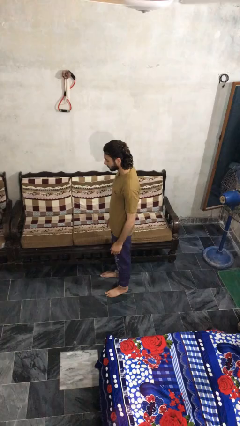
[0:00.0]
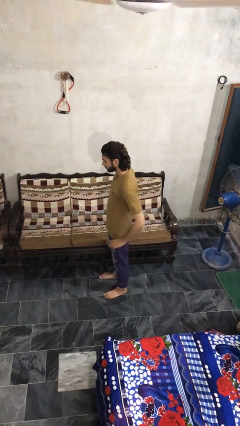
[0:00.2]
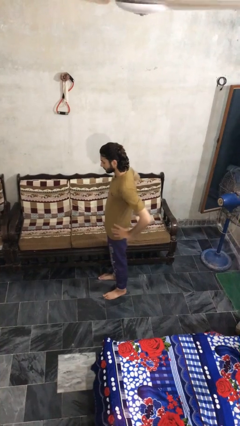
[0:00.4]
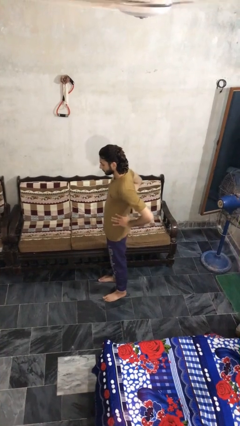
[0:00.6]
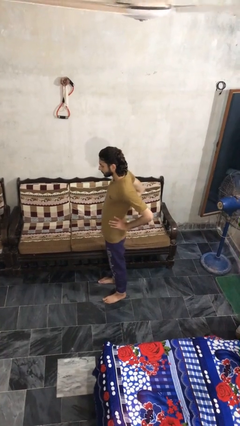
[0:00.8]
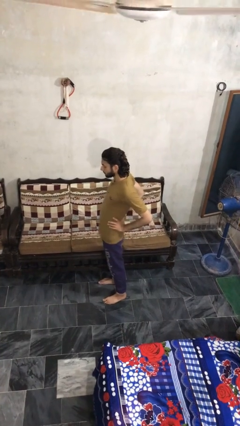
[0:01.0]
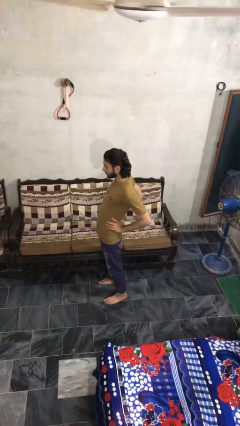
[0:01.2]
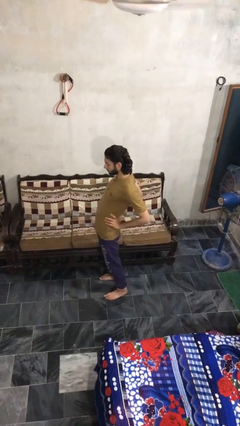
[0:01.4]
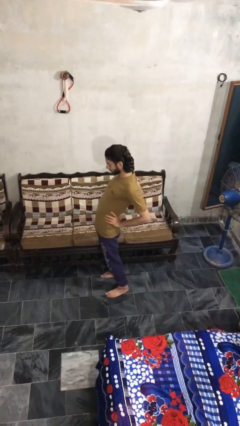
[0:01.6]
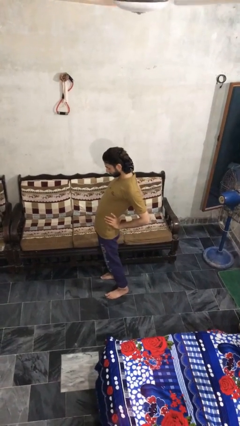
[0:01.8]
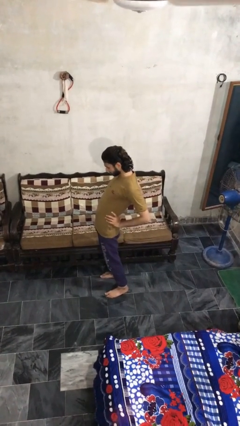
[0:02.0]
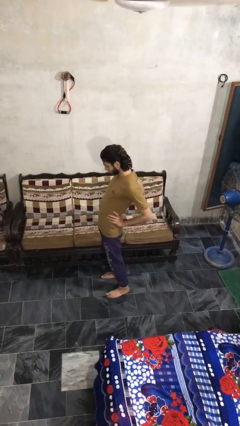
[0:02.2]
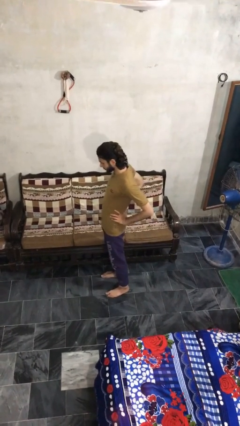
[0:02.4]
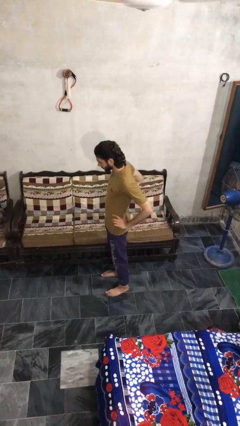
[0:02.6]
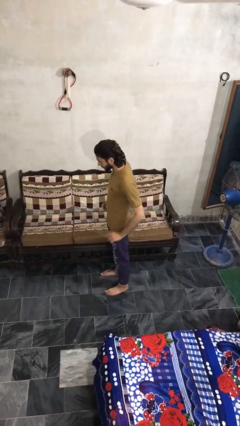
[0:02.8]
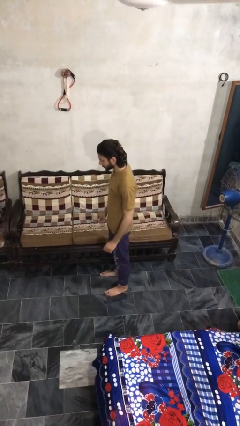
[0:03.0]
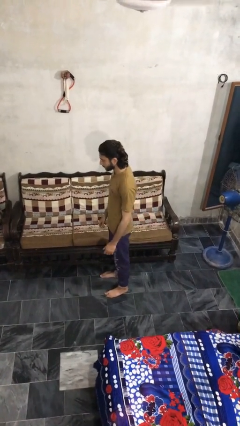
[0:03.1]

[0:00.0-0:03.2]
person stretches back

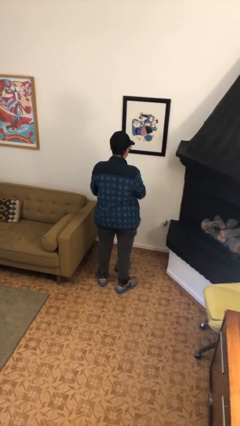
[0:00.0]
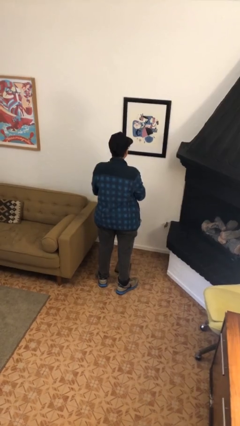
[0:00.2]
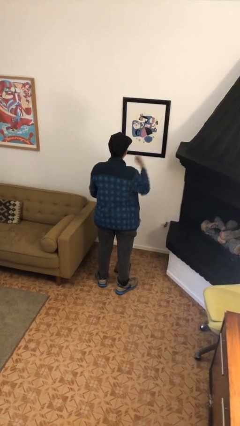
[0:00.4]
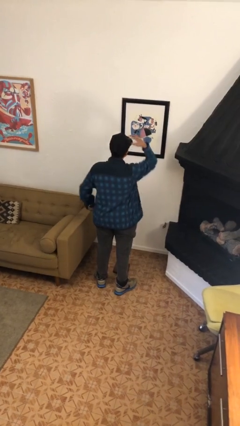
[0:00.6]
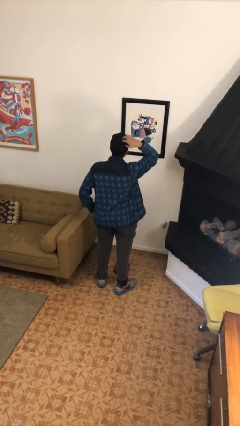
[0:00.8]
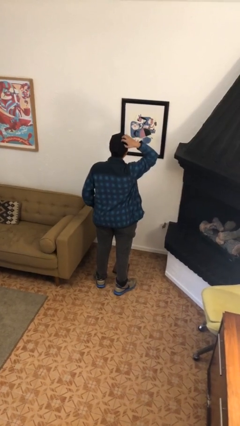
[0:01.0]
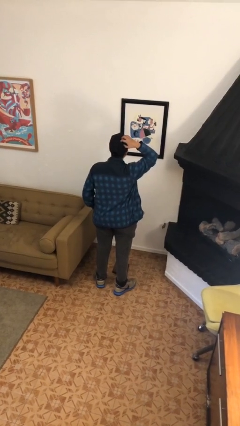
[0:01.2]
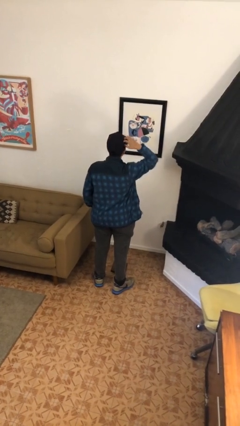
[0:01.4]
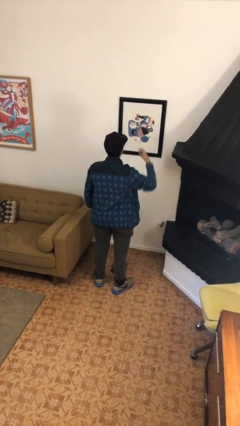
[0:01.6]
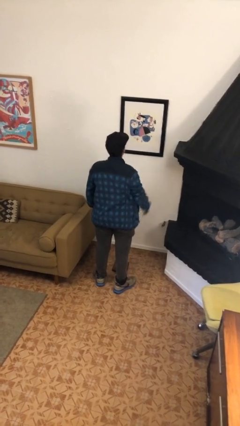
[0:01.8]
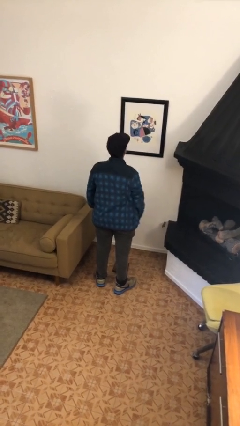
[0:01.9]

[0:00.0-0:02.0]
person scratches face

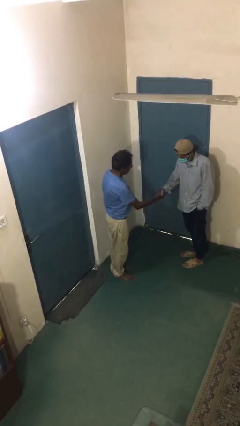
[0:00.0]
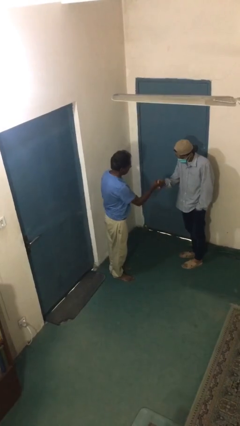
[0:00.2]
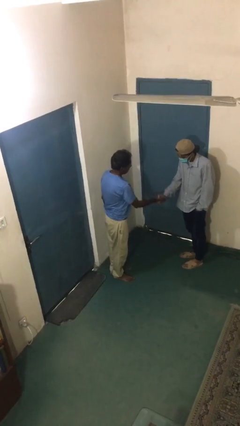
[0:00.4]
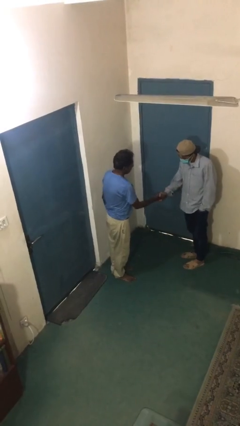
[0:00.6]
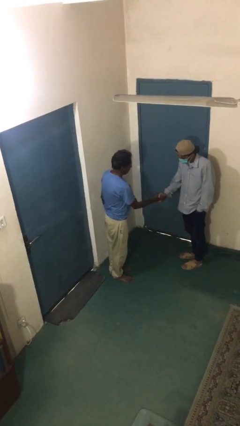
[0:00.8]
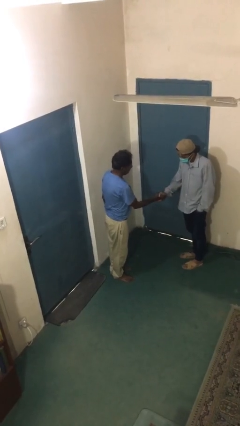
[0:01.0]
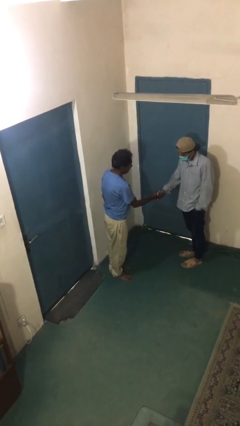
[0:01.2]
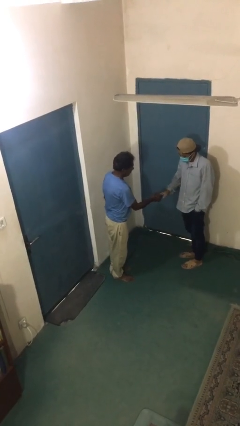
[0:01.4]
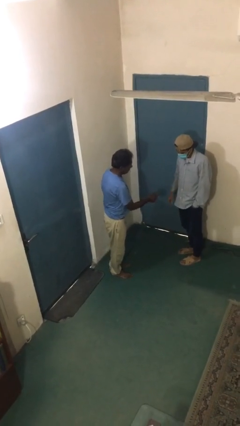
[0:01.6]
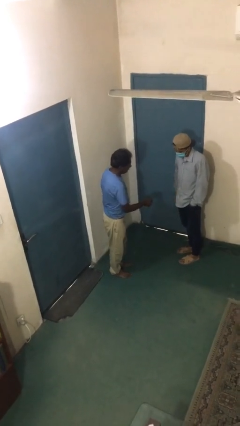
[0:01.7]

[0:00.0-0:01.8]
person shakes hand

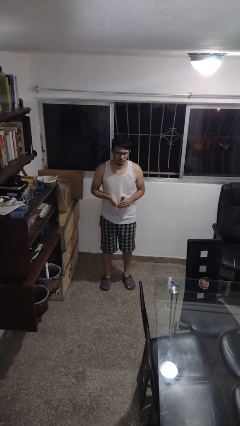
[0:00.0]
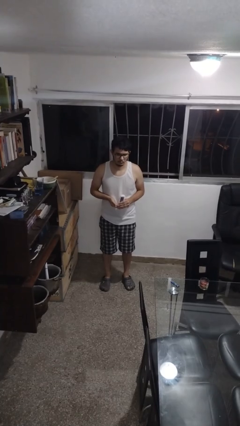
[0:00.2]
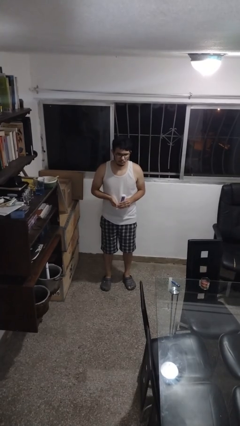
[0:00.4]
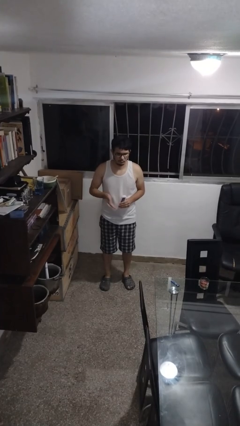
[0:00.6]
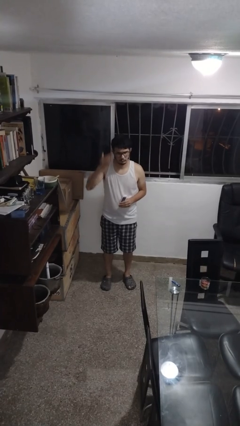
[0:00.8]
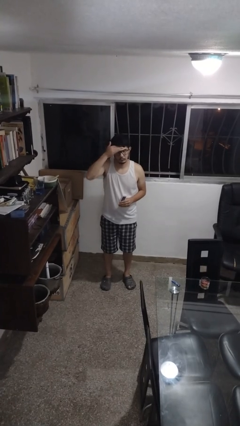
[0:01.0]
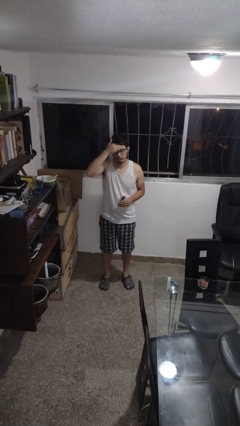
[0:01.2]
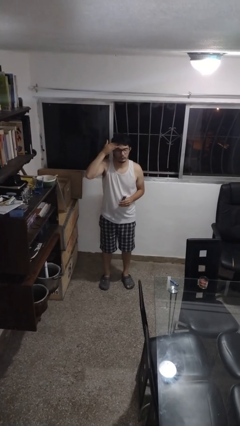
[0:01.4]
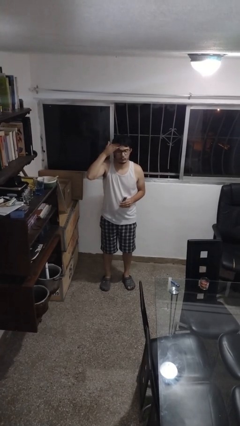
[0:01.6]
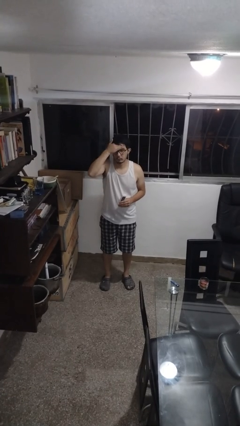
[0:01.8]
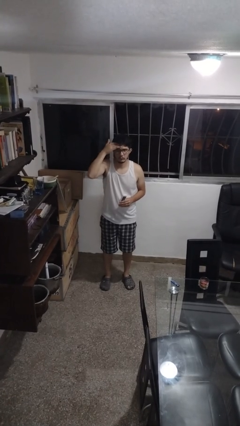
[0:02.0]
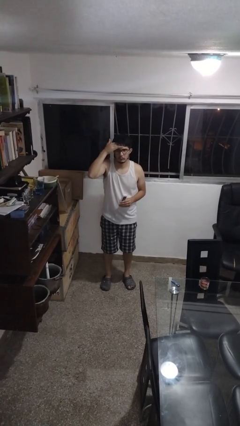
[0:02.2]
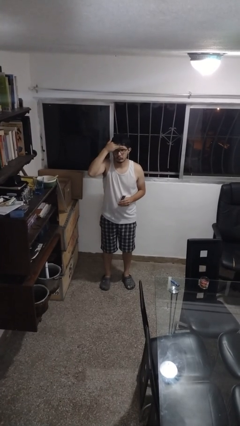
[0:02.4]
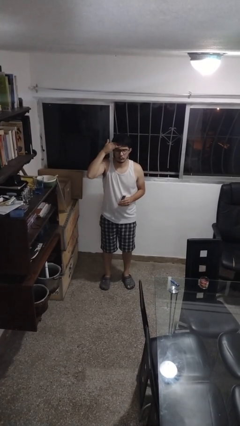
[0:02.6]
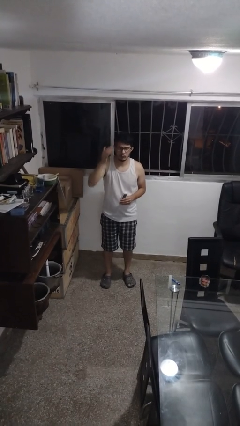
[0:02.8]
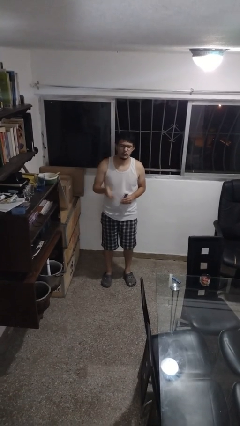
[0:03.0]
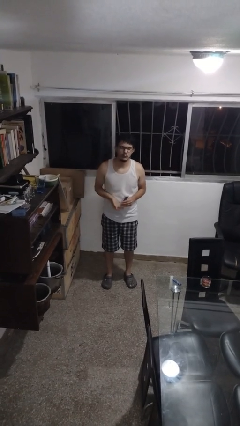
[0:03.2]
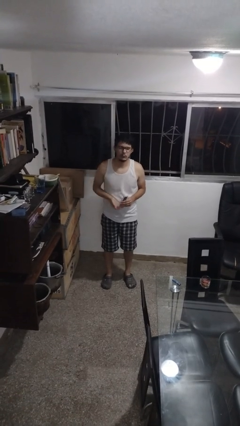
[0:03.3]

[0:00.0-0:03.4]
person applies facial moisturizer

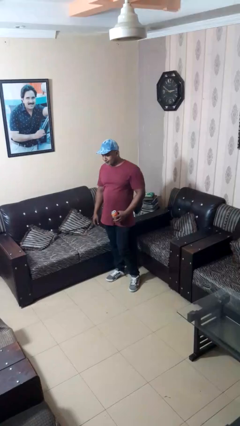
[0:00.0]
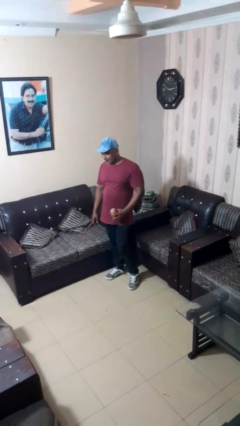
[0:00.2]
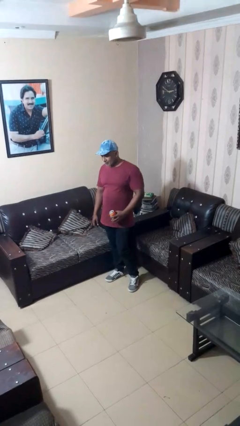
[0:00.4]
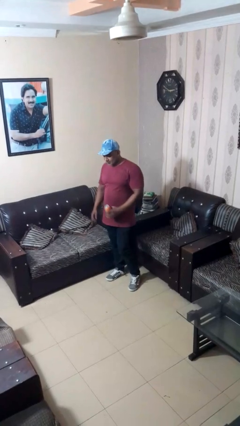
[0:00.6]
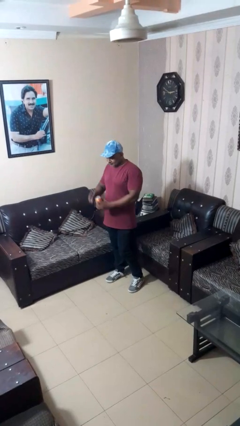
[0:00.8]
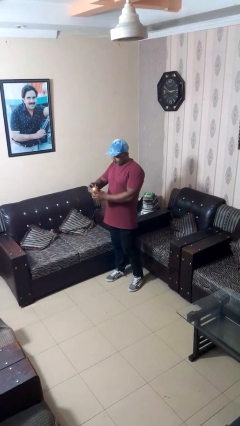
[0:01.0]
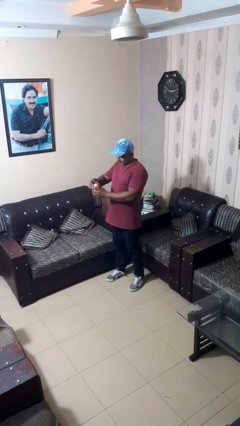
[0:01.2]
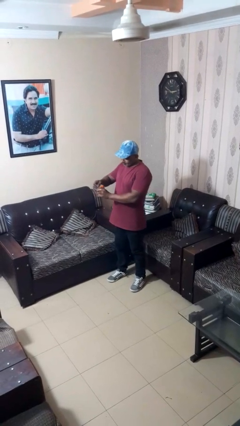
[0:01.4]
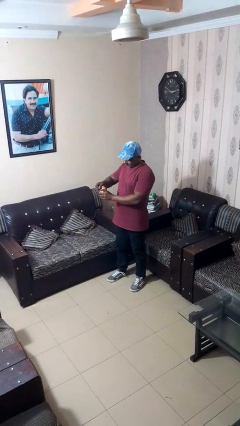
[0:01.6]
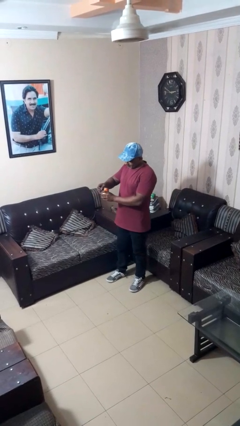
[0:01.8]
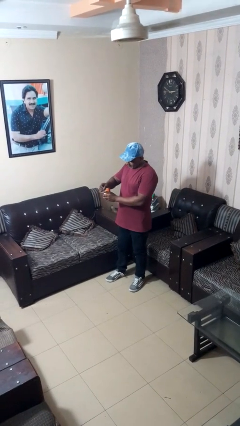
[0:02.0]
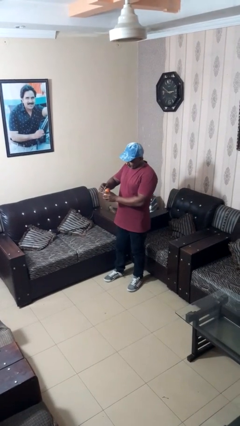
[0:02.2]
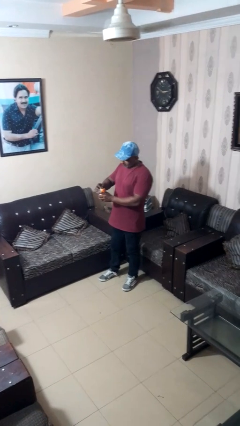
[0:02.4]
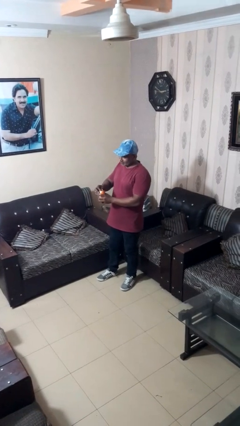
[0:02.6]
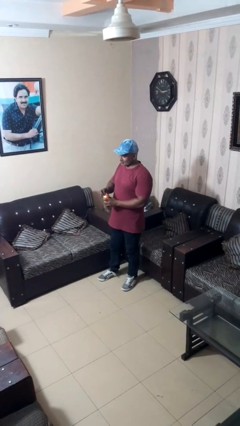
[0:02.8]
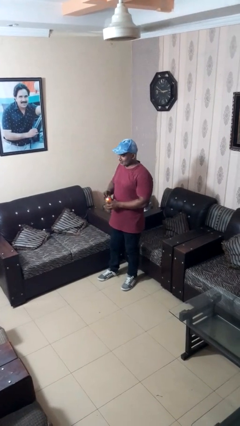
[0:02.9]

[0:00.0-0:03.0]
person opens beverage can

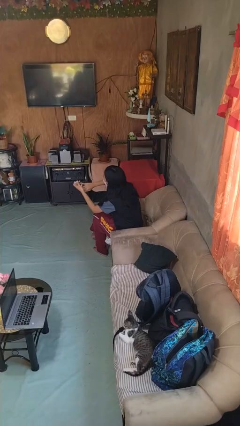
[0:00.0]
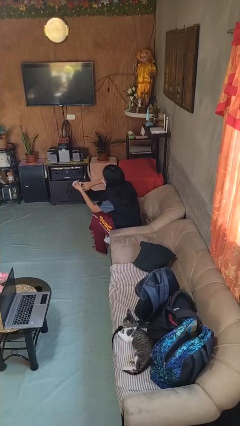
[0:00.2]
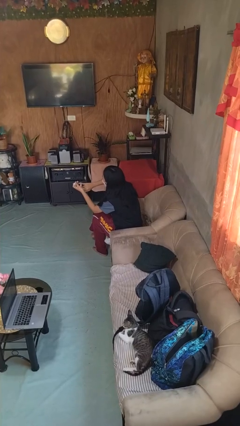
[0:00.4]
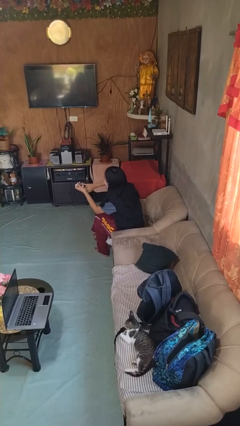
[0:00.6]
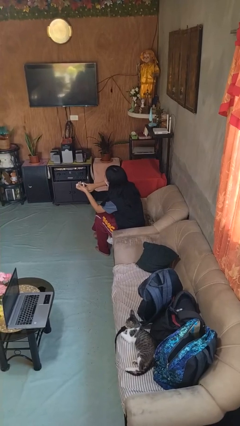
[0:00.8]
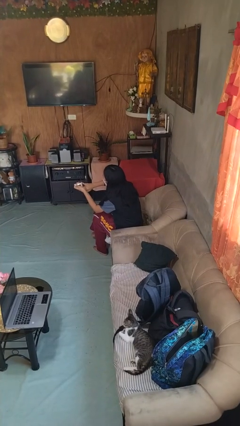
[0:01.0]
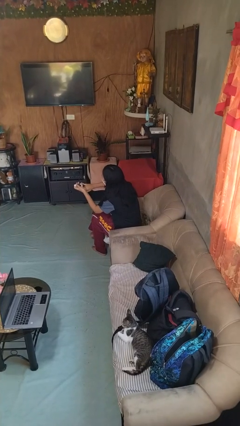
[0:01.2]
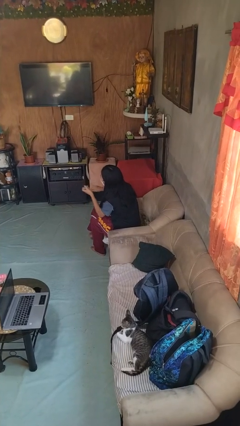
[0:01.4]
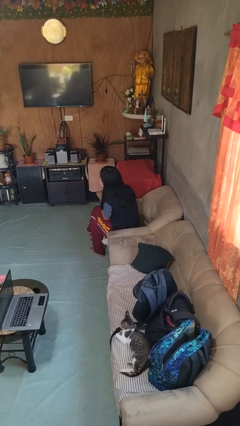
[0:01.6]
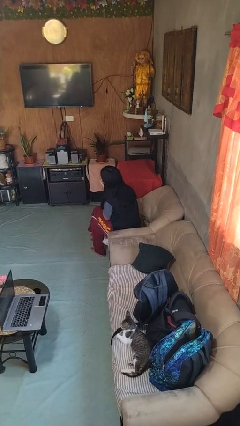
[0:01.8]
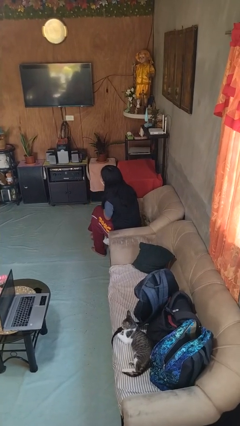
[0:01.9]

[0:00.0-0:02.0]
person clips fingernails

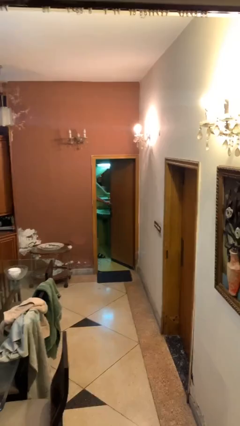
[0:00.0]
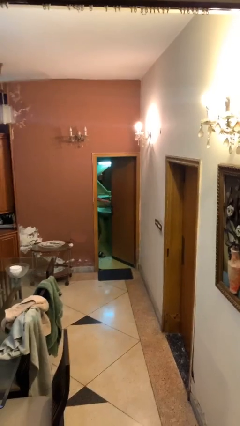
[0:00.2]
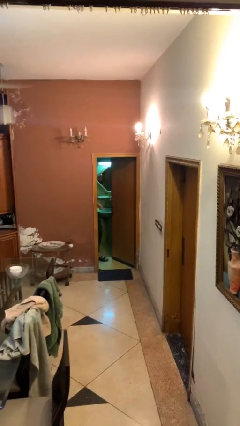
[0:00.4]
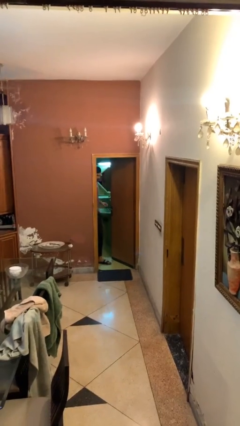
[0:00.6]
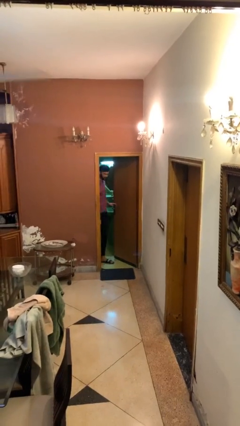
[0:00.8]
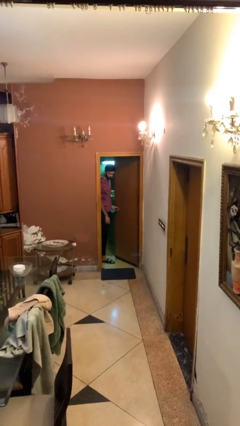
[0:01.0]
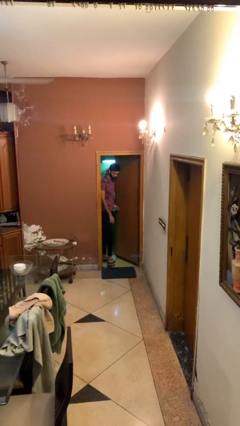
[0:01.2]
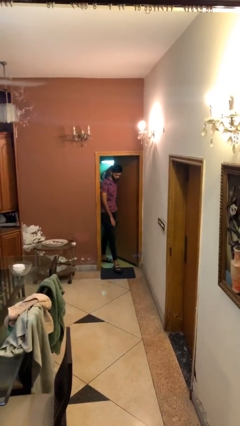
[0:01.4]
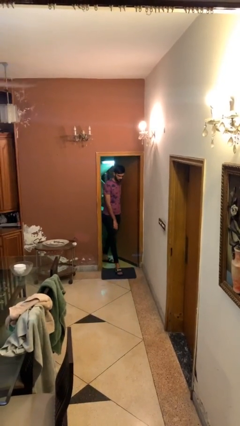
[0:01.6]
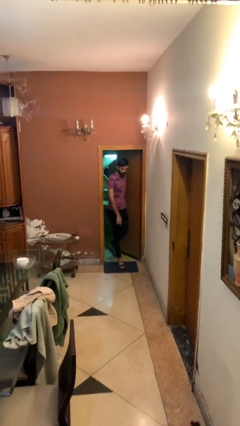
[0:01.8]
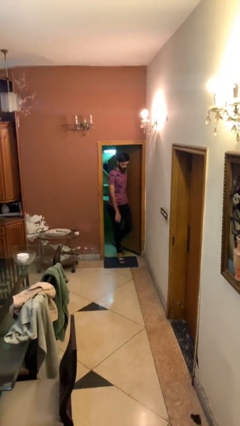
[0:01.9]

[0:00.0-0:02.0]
person enters scene through structure
